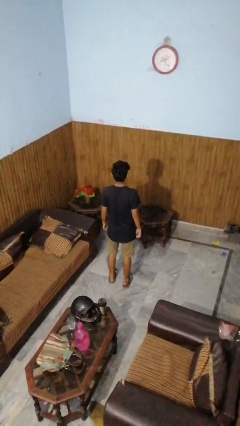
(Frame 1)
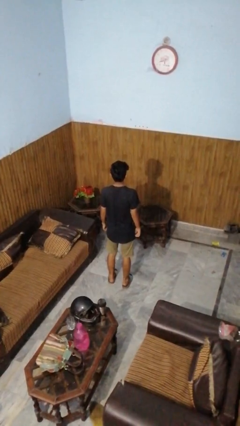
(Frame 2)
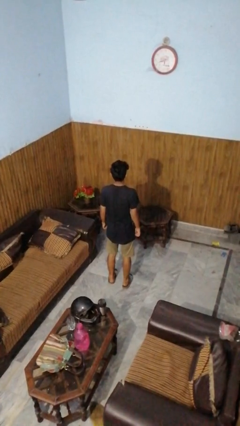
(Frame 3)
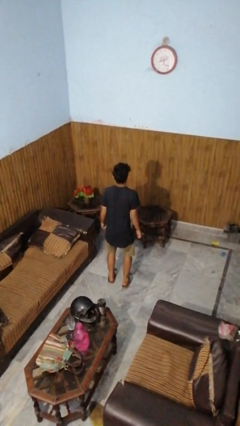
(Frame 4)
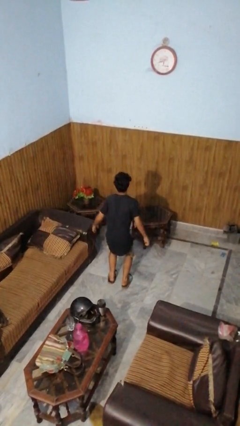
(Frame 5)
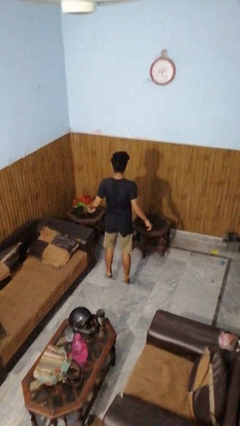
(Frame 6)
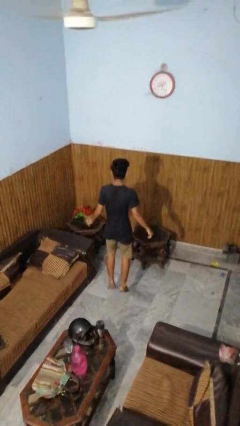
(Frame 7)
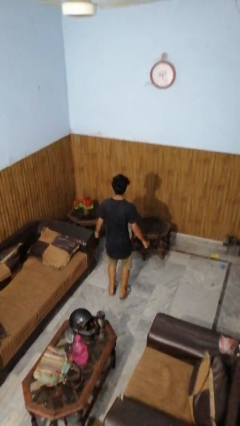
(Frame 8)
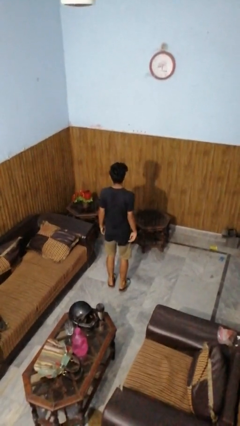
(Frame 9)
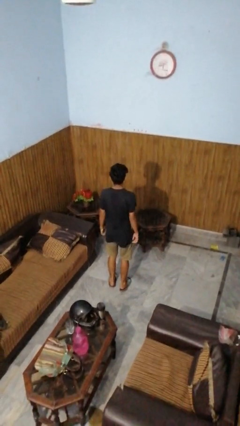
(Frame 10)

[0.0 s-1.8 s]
person jumps

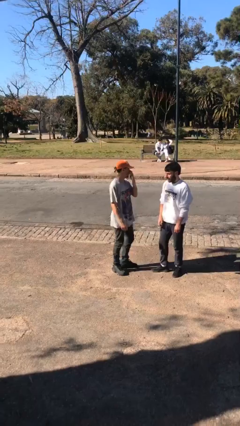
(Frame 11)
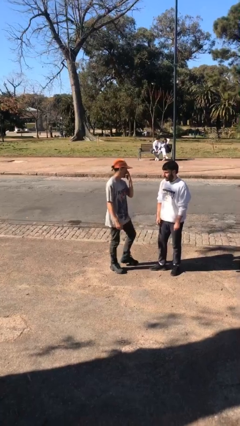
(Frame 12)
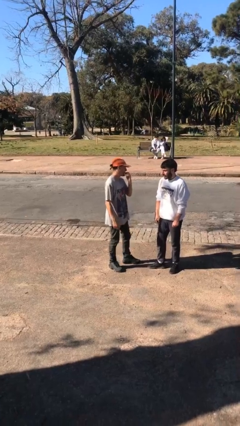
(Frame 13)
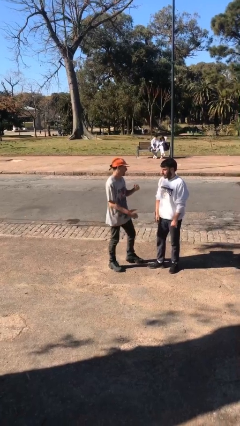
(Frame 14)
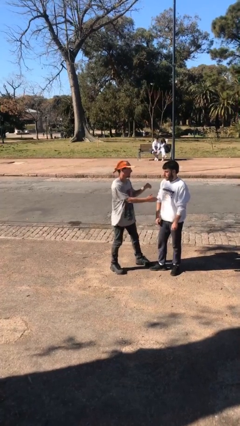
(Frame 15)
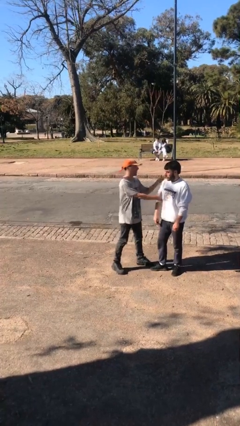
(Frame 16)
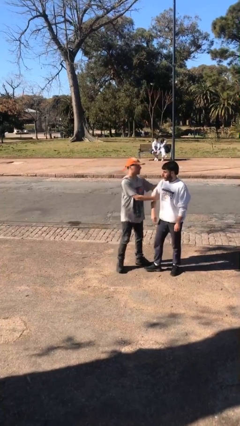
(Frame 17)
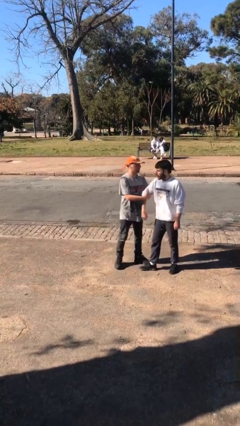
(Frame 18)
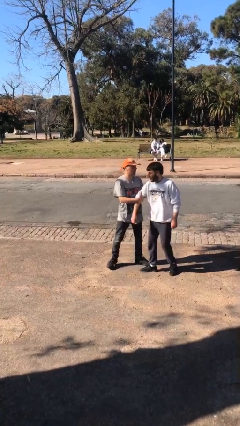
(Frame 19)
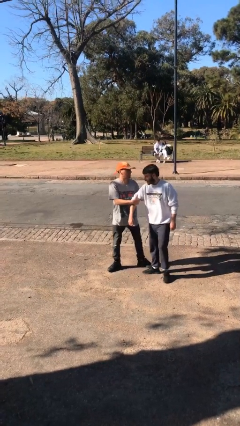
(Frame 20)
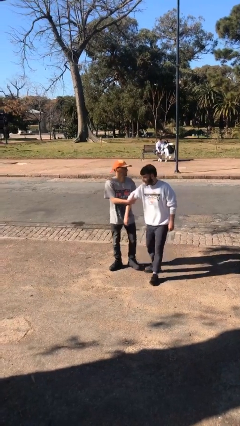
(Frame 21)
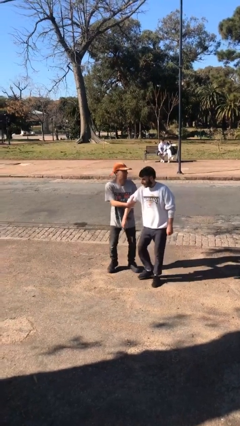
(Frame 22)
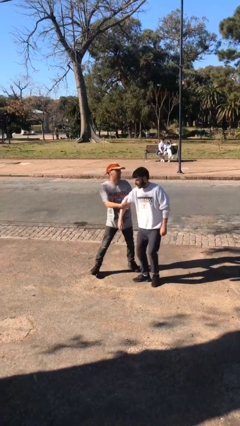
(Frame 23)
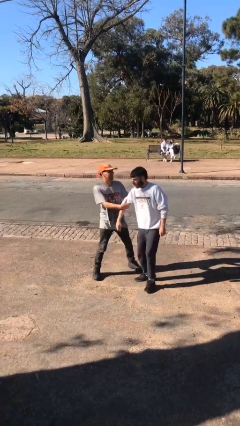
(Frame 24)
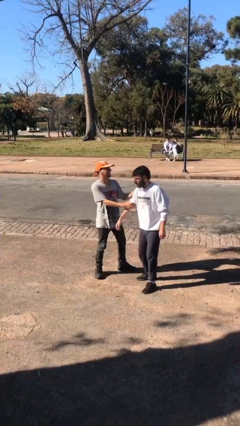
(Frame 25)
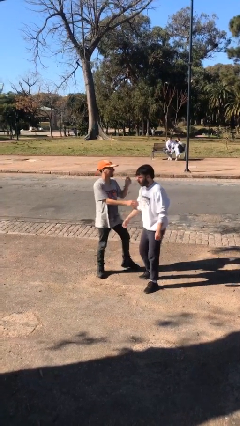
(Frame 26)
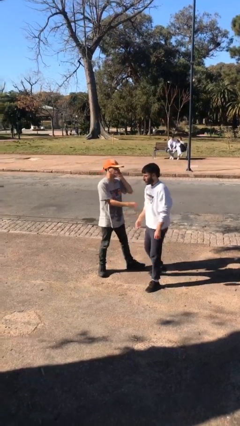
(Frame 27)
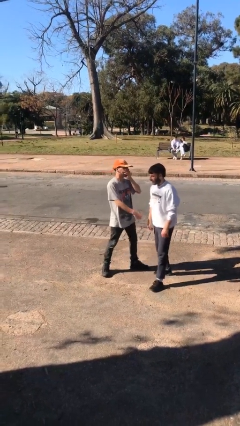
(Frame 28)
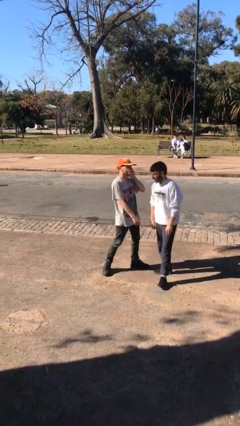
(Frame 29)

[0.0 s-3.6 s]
person grabs person by bicep

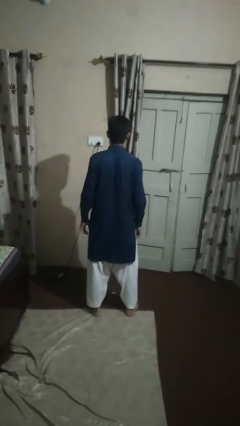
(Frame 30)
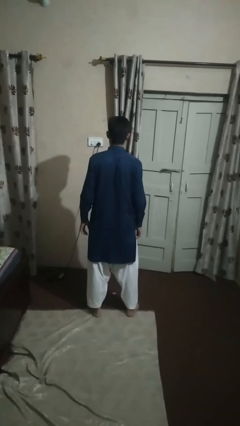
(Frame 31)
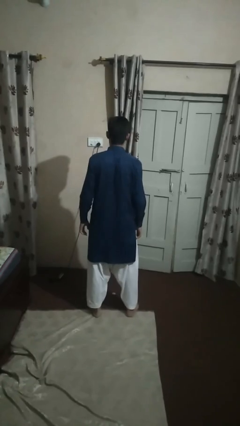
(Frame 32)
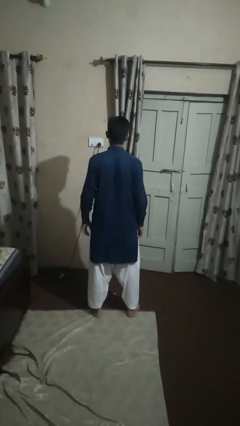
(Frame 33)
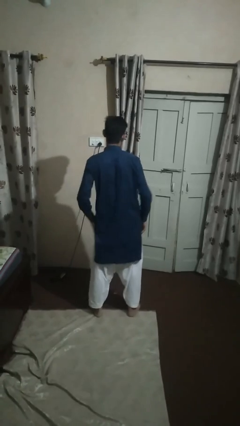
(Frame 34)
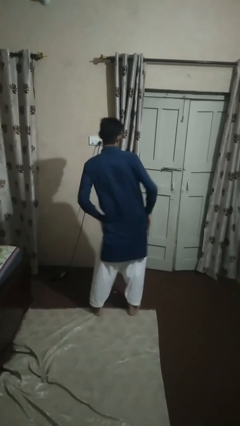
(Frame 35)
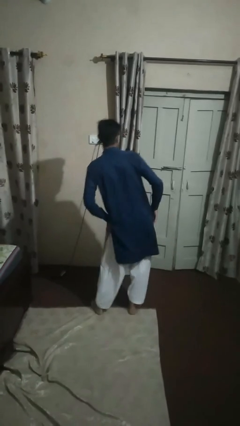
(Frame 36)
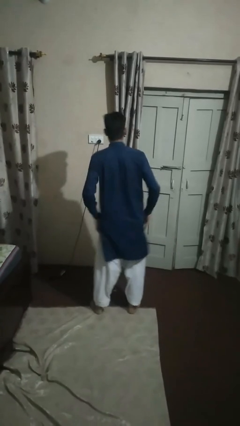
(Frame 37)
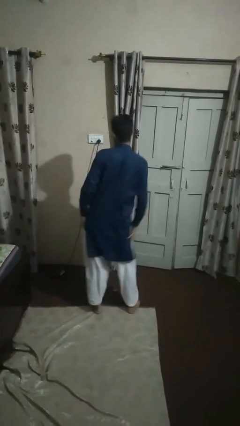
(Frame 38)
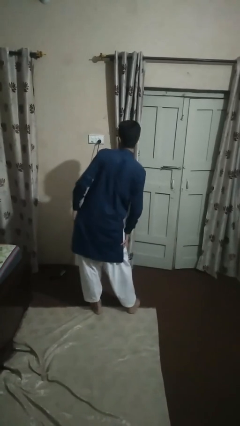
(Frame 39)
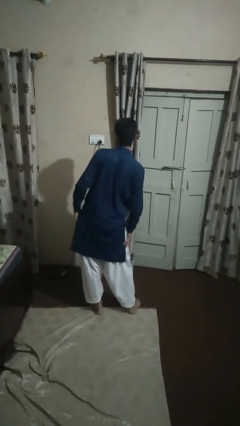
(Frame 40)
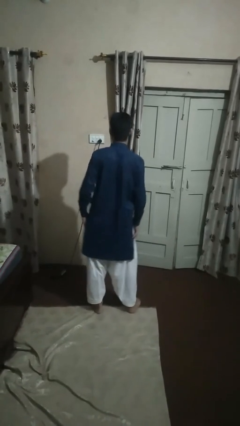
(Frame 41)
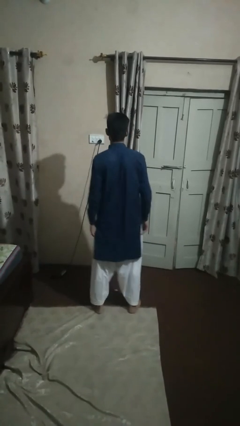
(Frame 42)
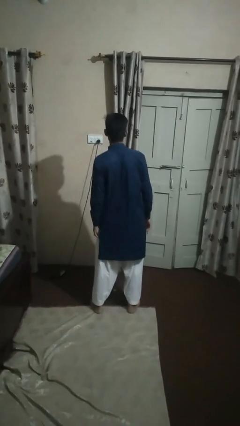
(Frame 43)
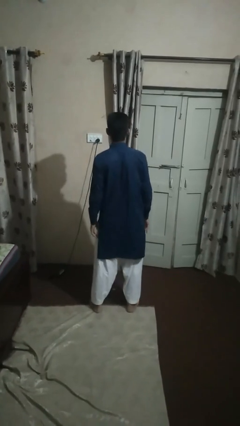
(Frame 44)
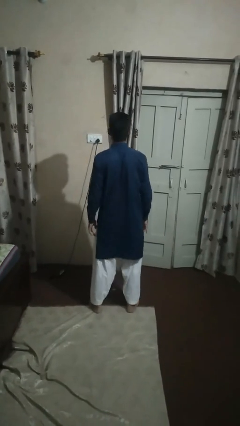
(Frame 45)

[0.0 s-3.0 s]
person wiggles hips

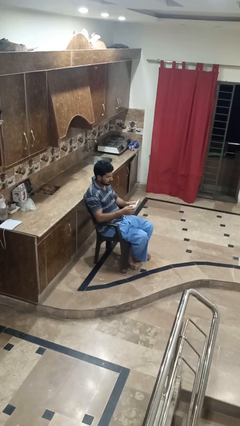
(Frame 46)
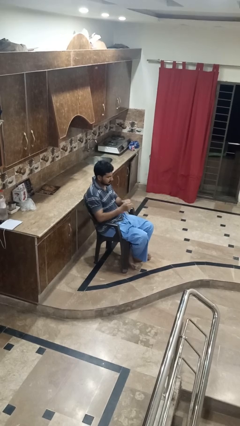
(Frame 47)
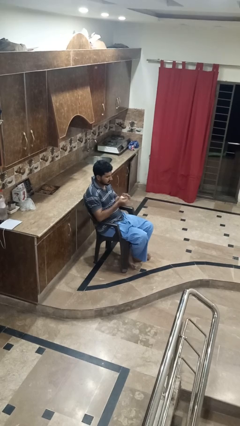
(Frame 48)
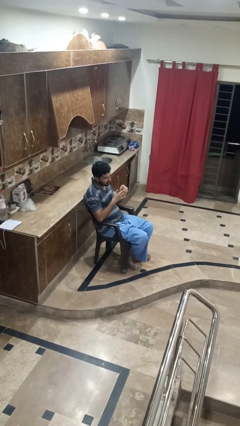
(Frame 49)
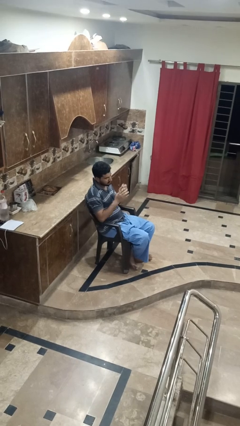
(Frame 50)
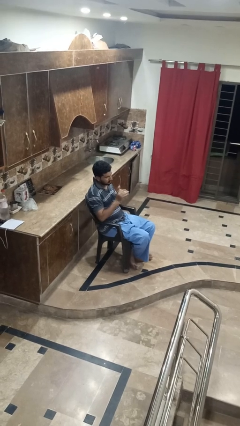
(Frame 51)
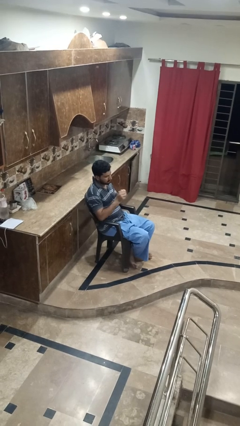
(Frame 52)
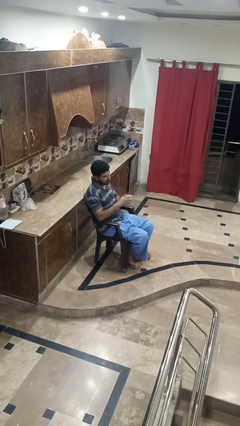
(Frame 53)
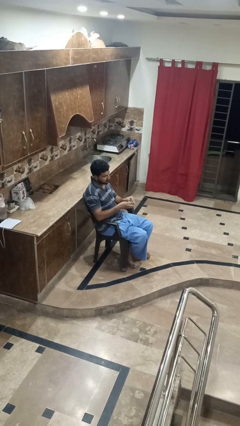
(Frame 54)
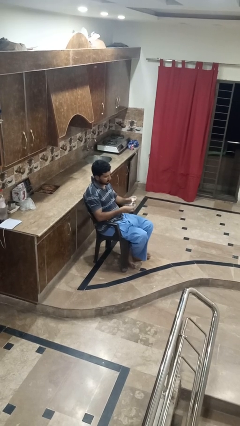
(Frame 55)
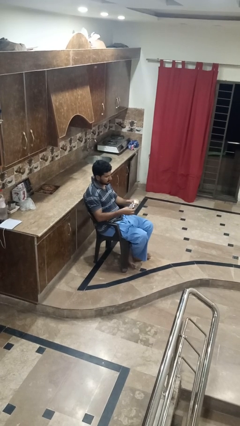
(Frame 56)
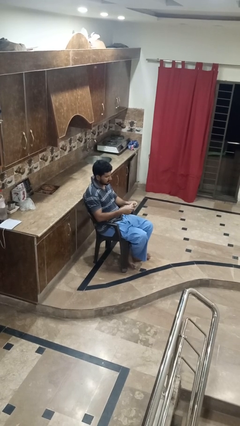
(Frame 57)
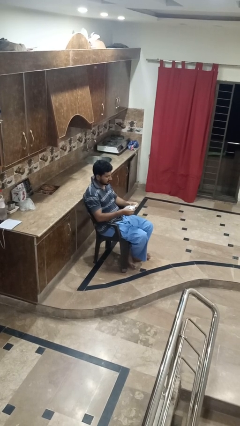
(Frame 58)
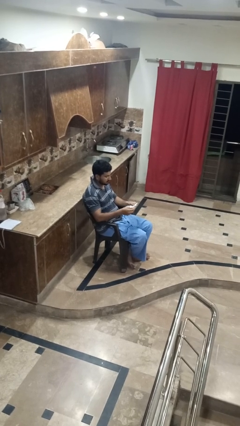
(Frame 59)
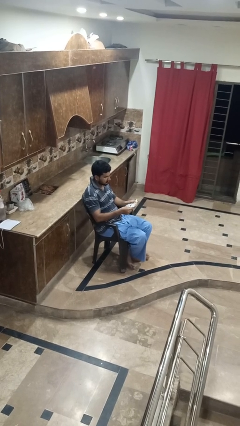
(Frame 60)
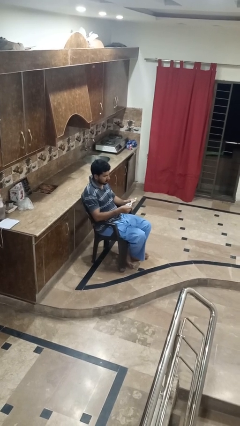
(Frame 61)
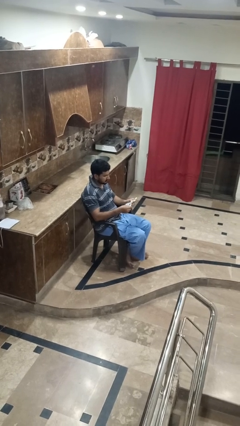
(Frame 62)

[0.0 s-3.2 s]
person crumples paper

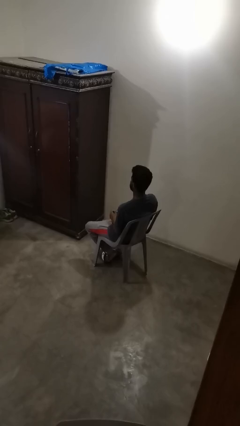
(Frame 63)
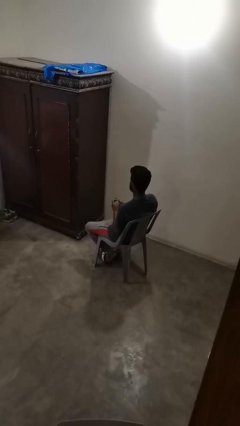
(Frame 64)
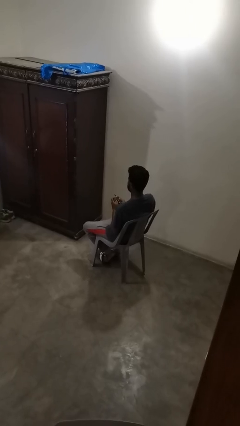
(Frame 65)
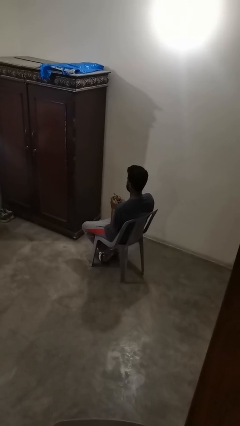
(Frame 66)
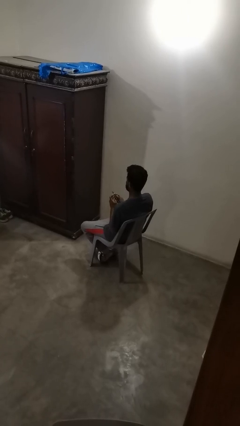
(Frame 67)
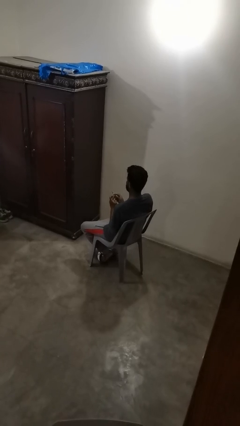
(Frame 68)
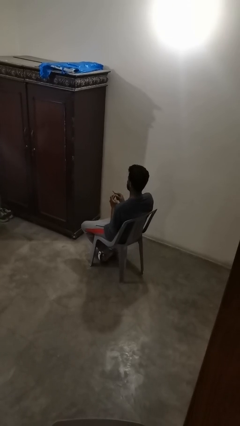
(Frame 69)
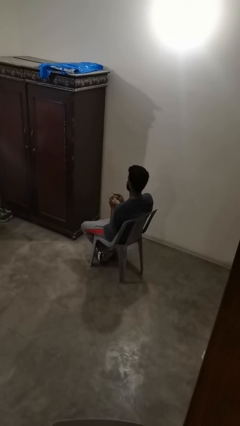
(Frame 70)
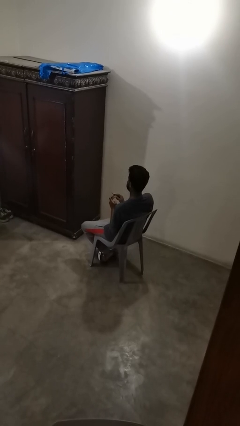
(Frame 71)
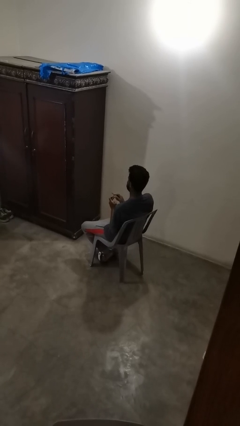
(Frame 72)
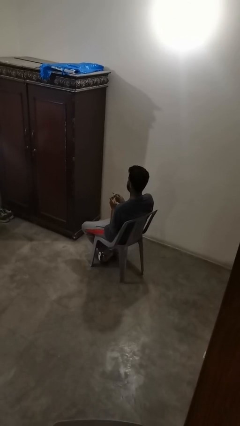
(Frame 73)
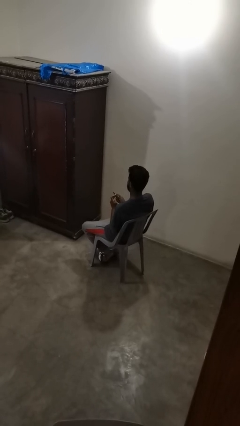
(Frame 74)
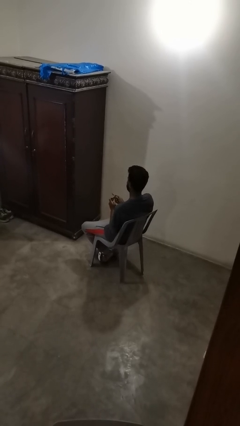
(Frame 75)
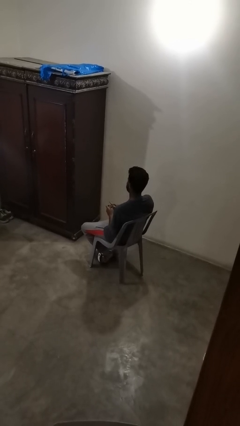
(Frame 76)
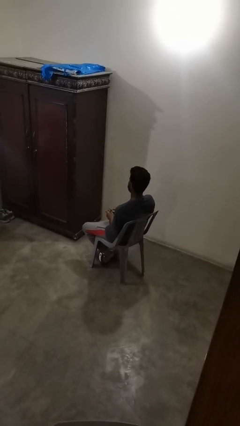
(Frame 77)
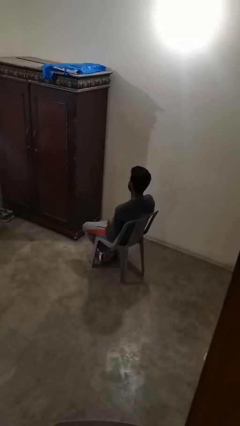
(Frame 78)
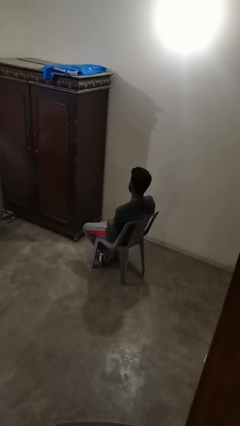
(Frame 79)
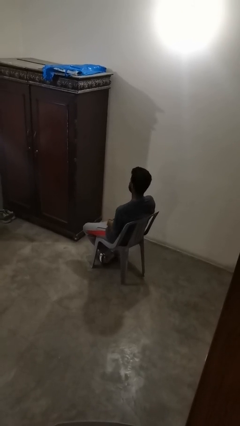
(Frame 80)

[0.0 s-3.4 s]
person files fingernails

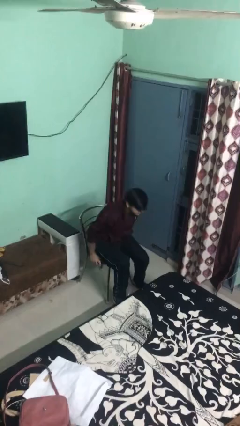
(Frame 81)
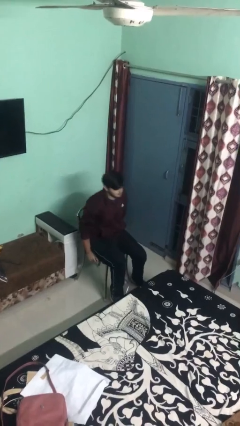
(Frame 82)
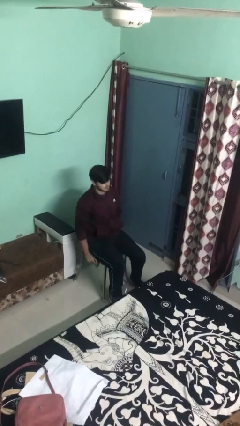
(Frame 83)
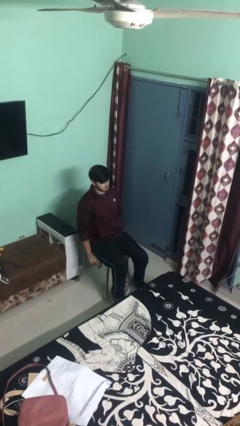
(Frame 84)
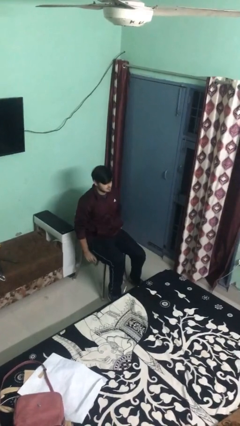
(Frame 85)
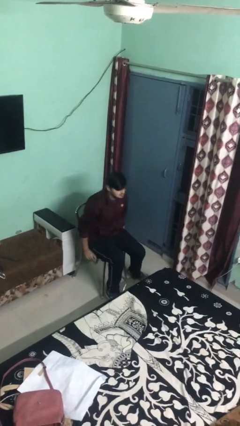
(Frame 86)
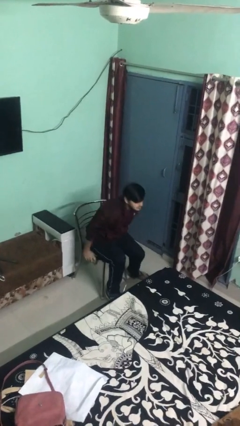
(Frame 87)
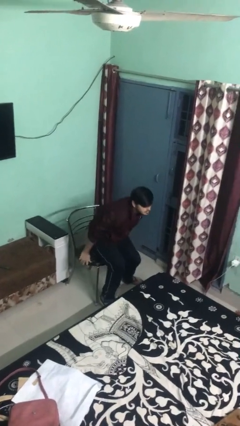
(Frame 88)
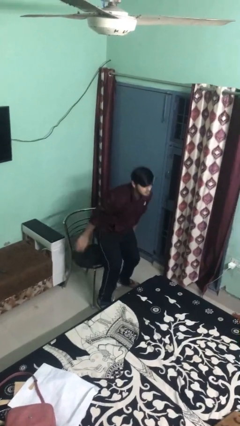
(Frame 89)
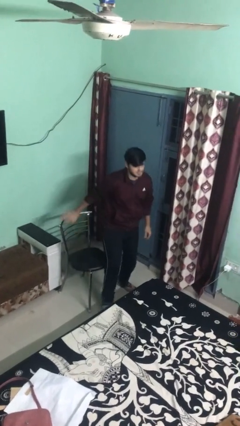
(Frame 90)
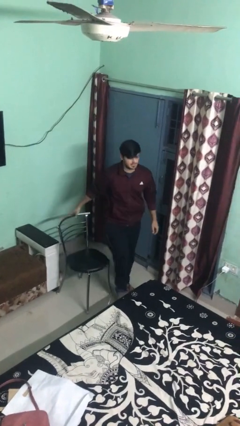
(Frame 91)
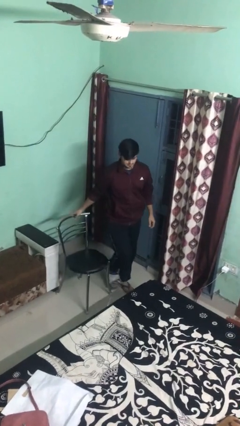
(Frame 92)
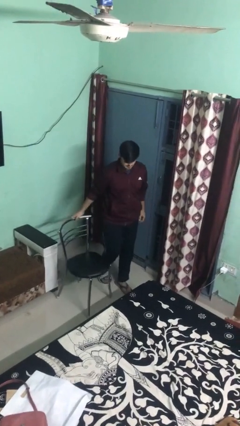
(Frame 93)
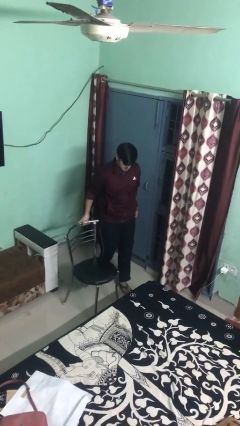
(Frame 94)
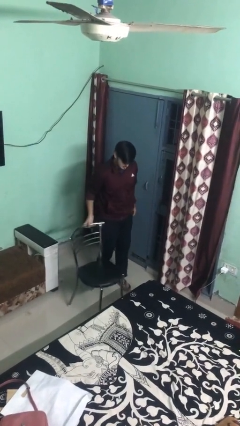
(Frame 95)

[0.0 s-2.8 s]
person stands up
